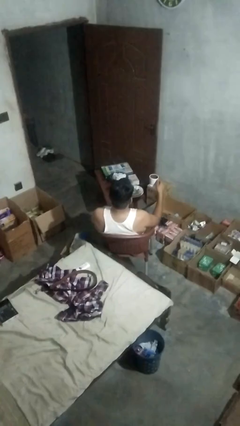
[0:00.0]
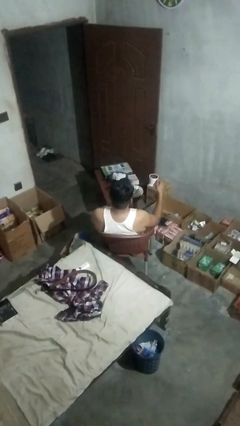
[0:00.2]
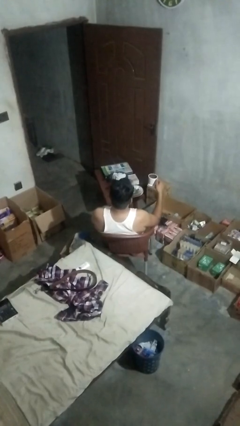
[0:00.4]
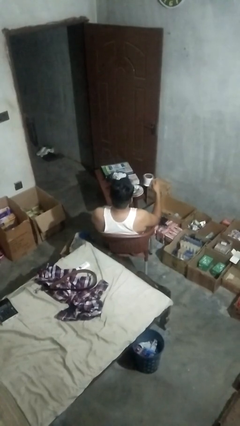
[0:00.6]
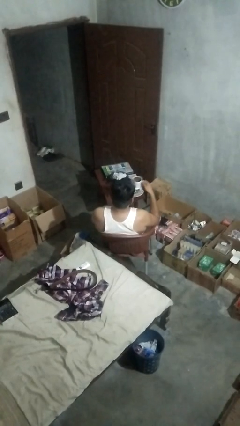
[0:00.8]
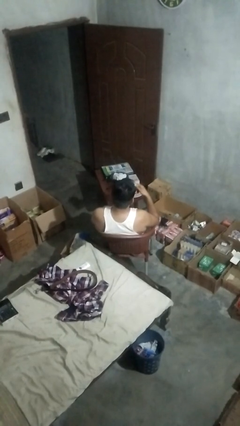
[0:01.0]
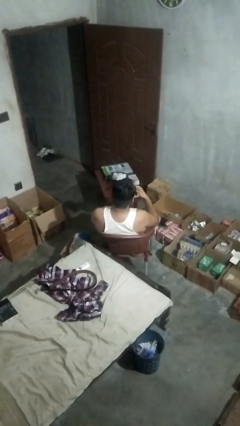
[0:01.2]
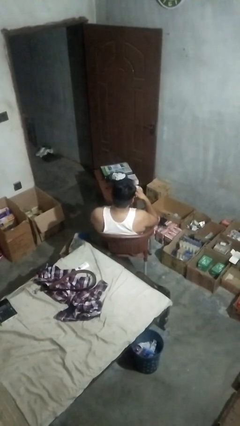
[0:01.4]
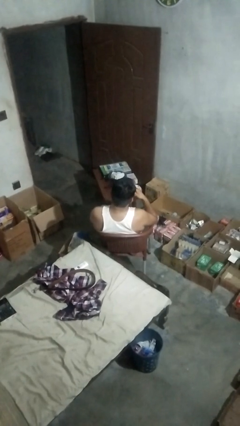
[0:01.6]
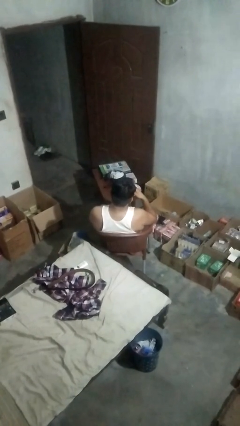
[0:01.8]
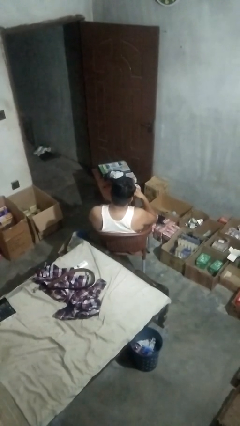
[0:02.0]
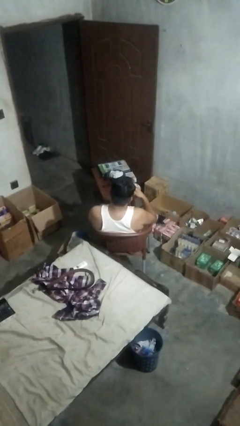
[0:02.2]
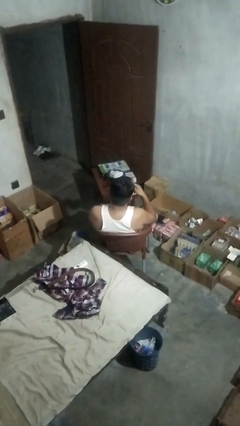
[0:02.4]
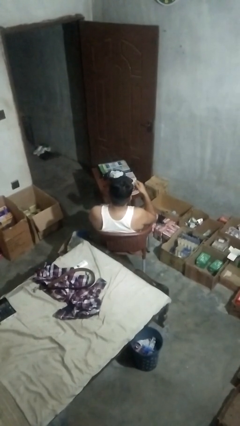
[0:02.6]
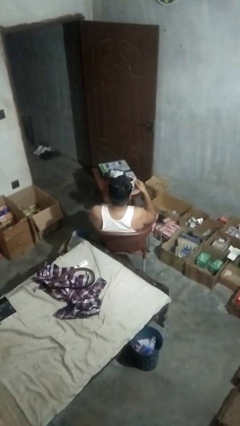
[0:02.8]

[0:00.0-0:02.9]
person drinks from mug

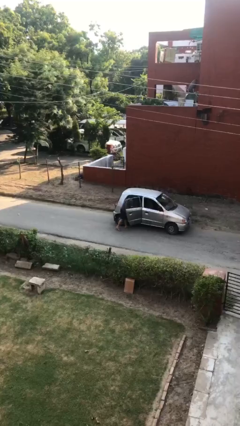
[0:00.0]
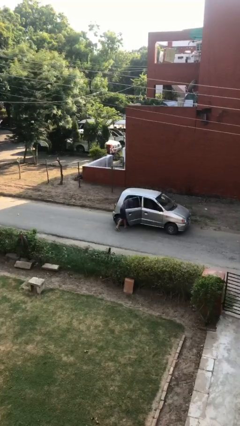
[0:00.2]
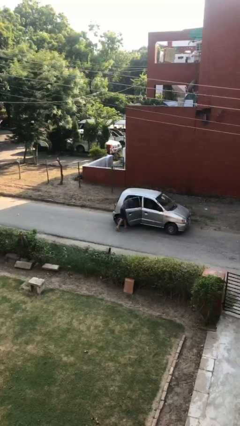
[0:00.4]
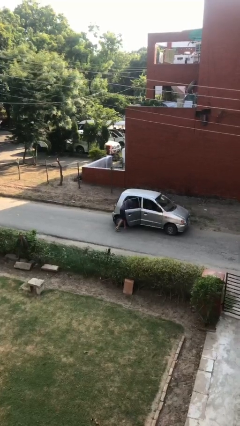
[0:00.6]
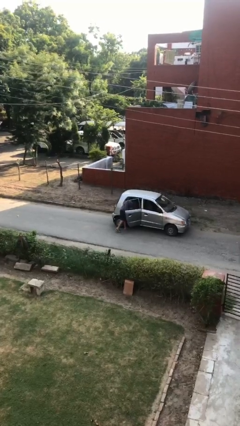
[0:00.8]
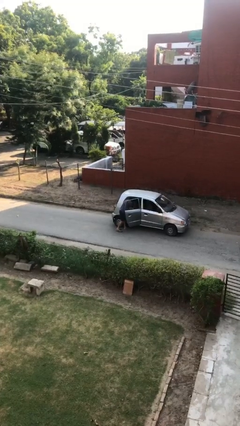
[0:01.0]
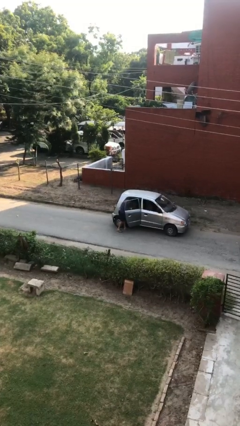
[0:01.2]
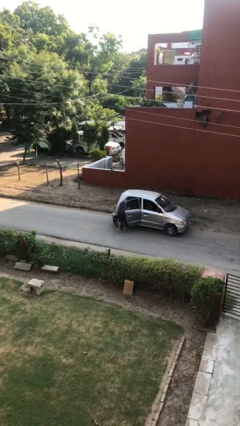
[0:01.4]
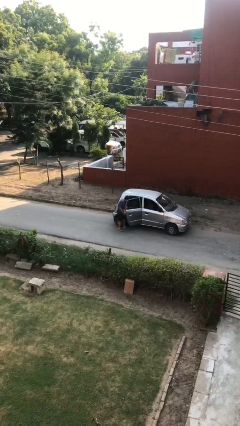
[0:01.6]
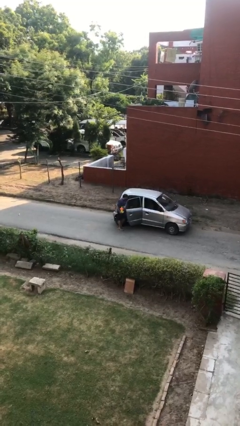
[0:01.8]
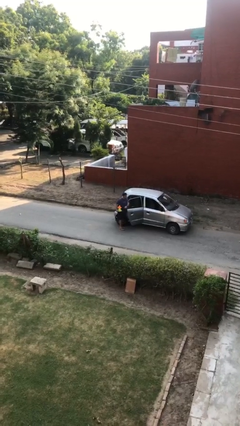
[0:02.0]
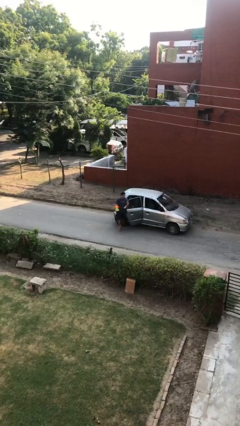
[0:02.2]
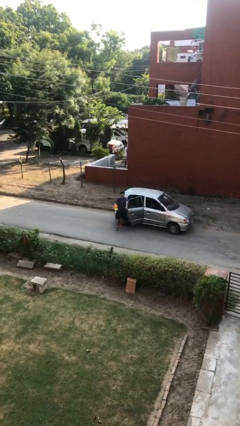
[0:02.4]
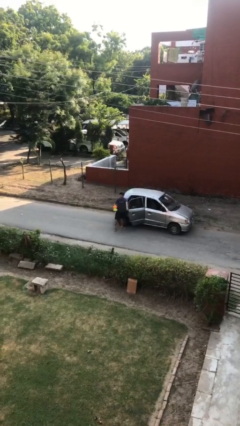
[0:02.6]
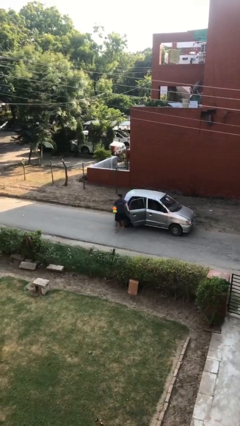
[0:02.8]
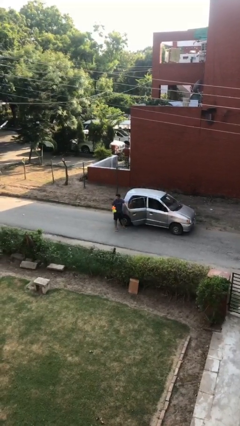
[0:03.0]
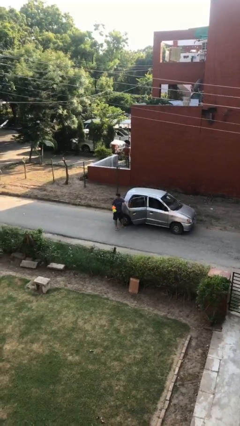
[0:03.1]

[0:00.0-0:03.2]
person unloads car

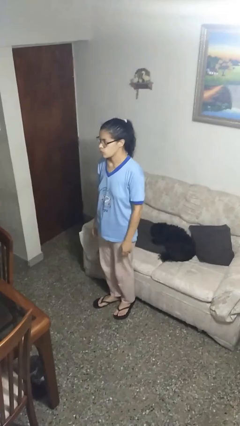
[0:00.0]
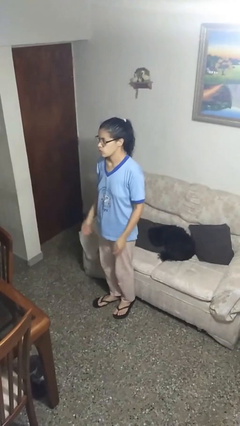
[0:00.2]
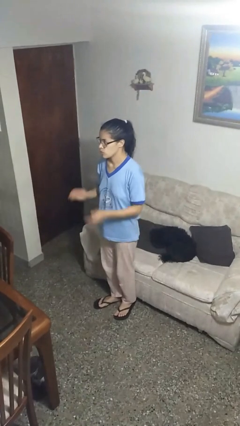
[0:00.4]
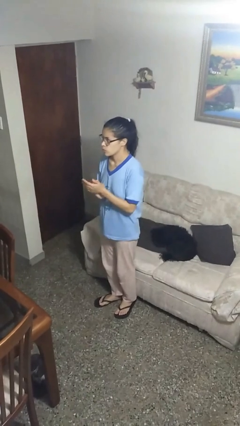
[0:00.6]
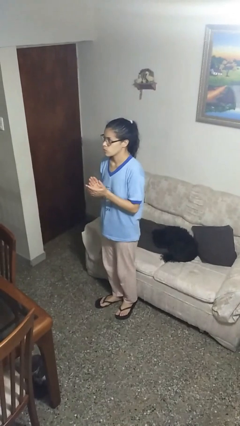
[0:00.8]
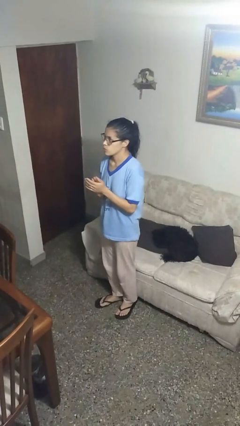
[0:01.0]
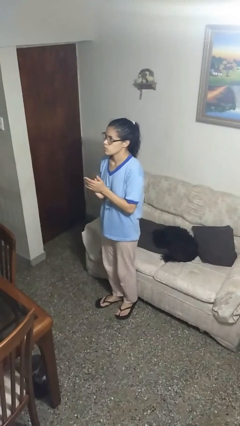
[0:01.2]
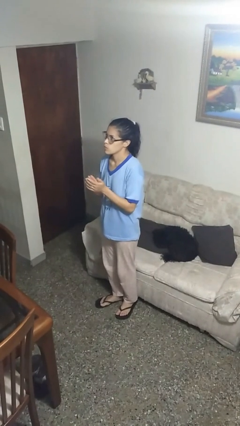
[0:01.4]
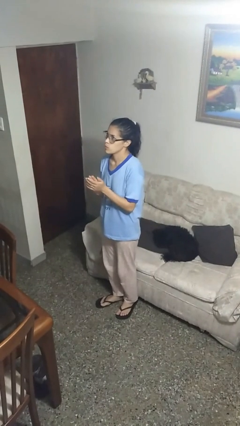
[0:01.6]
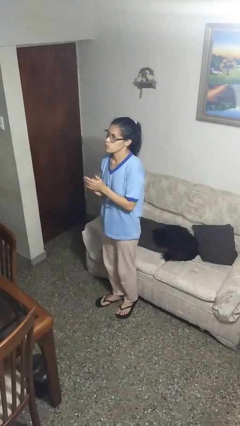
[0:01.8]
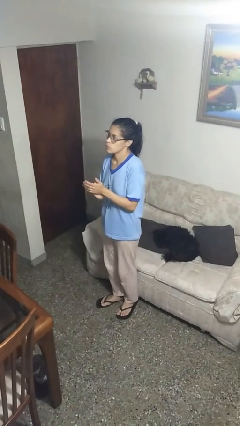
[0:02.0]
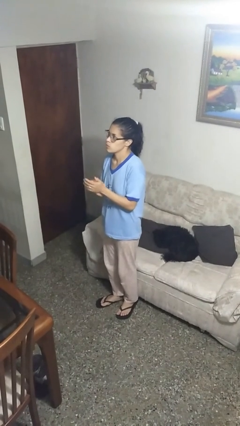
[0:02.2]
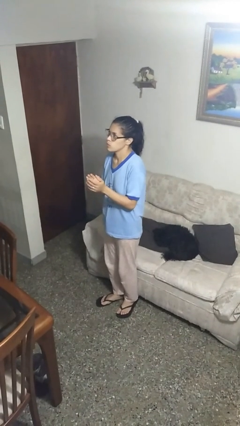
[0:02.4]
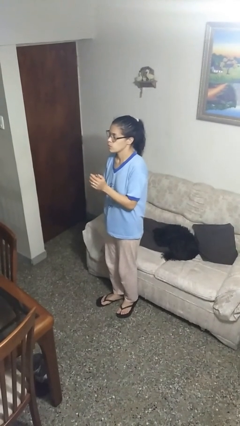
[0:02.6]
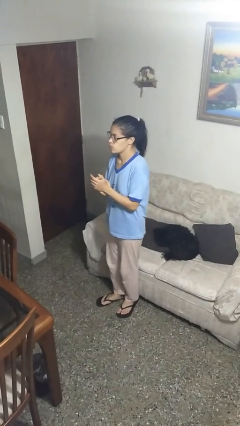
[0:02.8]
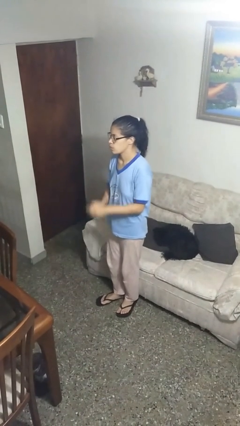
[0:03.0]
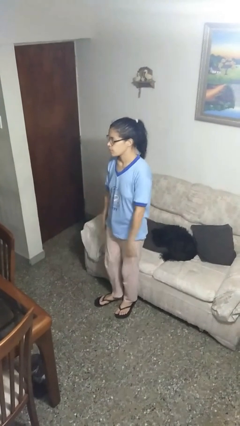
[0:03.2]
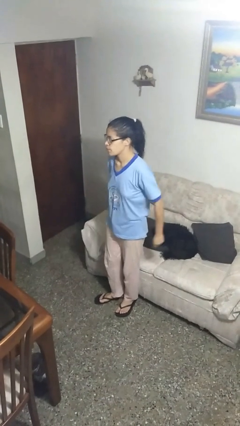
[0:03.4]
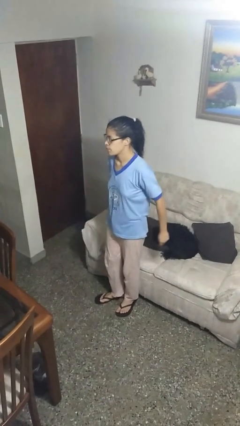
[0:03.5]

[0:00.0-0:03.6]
person claps hands

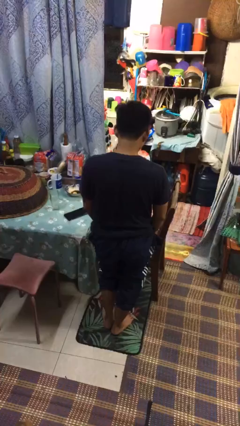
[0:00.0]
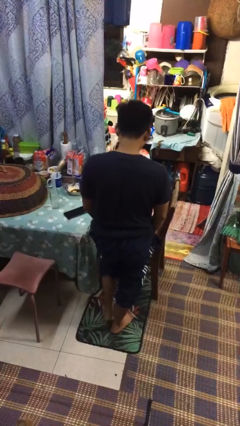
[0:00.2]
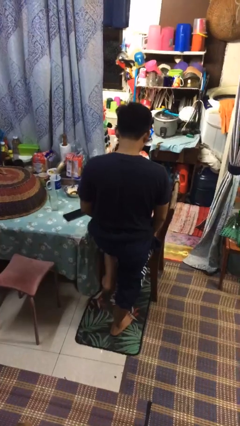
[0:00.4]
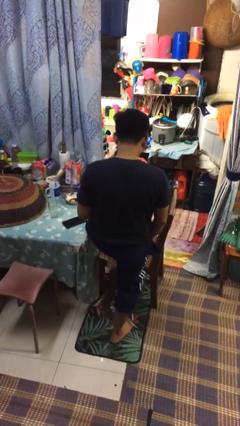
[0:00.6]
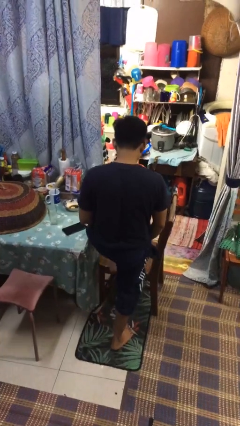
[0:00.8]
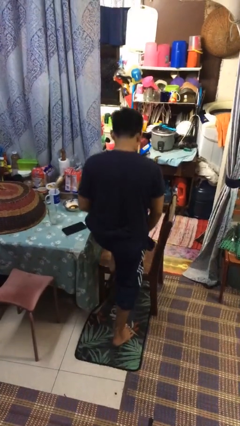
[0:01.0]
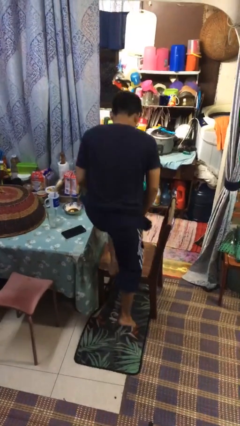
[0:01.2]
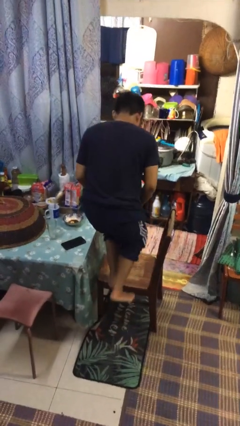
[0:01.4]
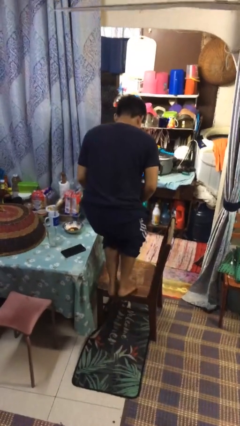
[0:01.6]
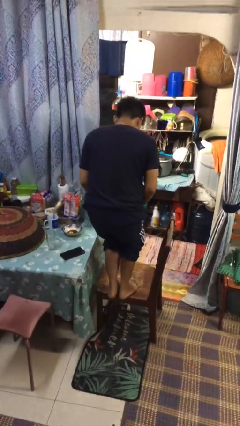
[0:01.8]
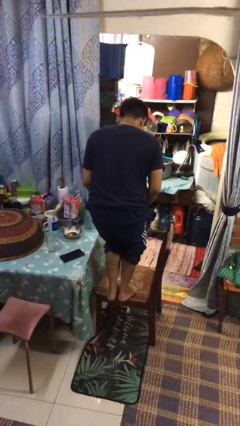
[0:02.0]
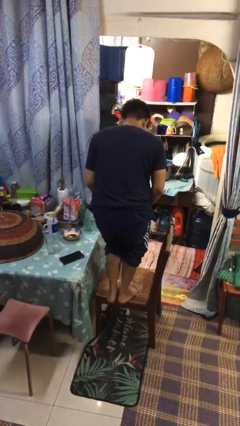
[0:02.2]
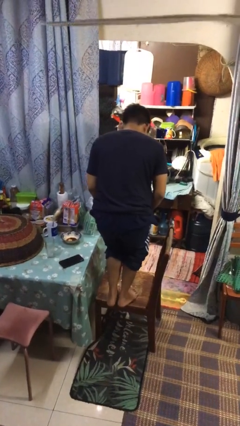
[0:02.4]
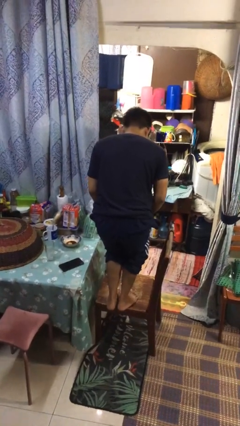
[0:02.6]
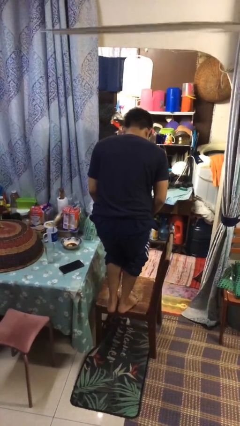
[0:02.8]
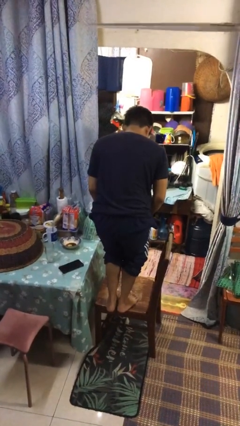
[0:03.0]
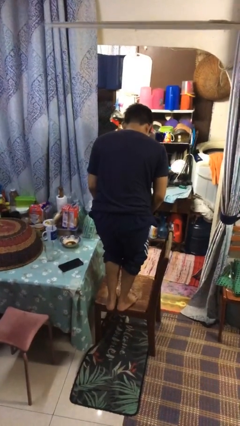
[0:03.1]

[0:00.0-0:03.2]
person climbs on chair

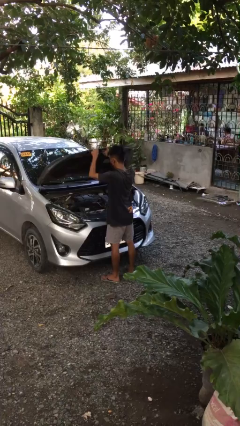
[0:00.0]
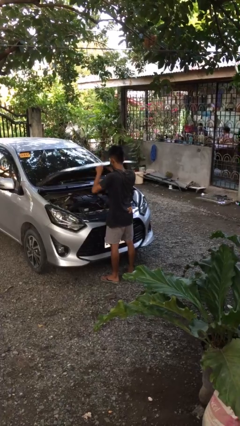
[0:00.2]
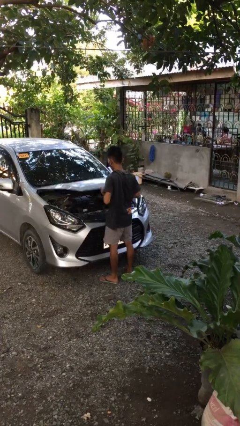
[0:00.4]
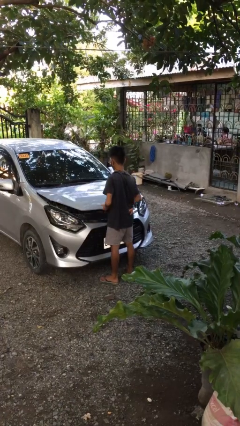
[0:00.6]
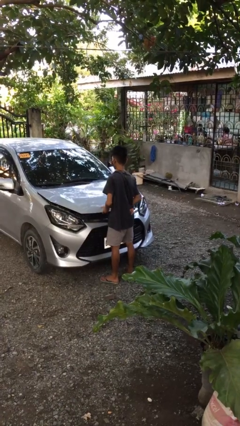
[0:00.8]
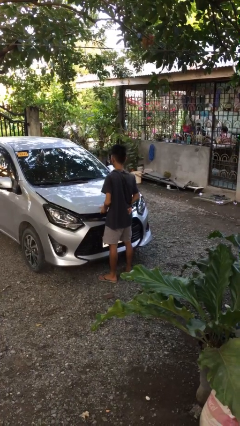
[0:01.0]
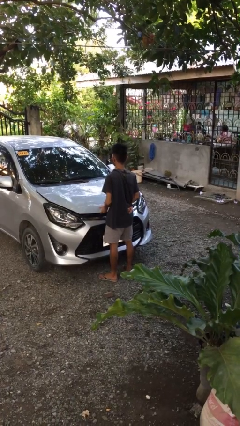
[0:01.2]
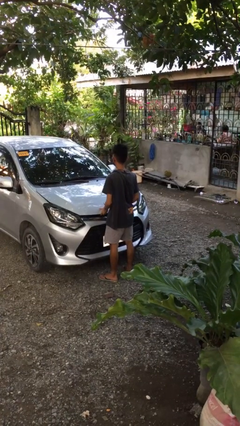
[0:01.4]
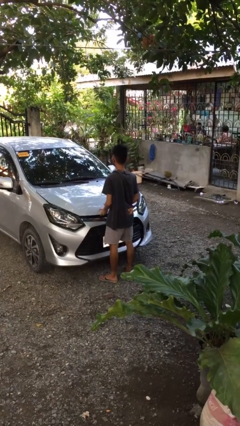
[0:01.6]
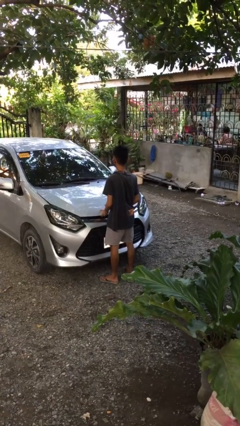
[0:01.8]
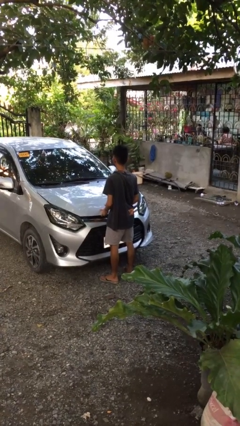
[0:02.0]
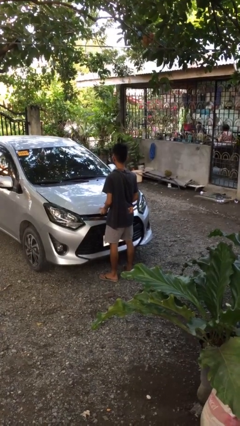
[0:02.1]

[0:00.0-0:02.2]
person closes car hood

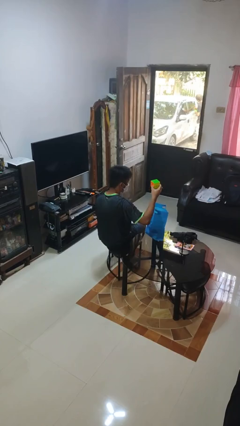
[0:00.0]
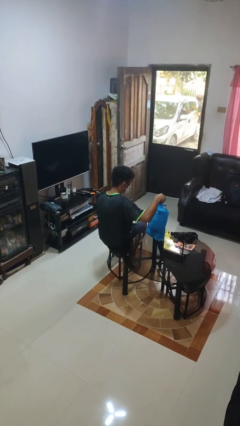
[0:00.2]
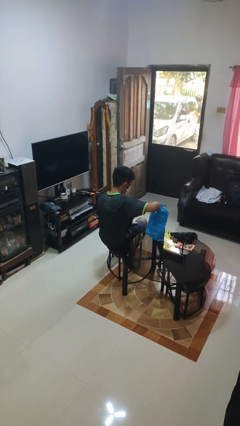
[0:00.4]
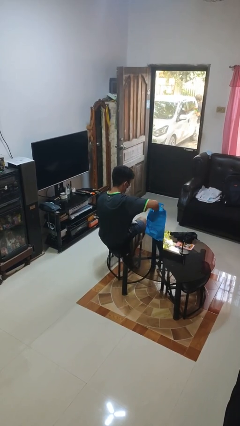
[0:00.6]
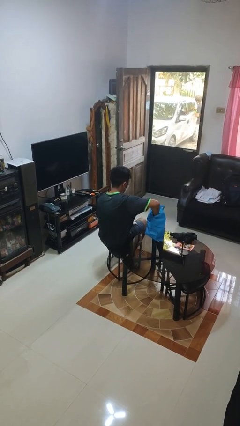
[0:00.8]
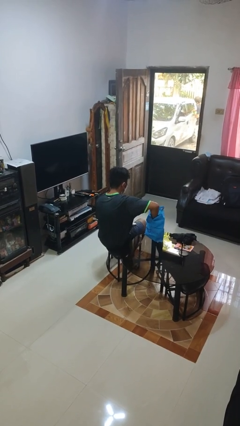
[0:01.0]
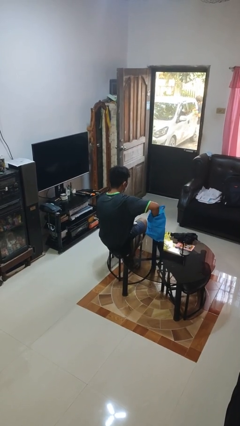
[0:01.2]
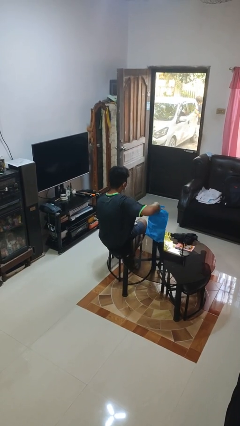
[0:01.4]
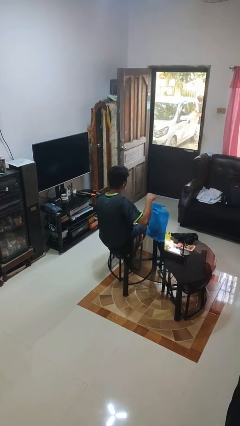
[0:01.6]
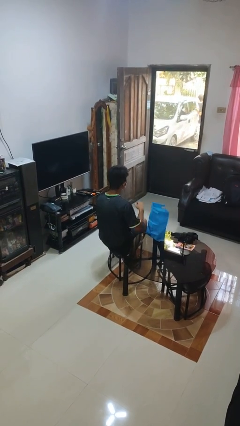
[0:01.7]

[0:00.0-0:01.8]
person puts object into bag

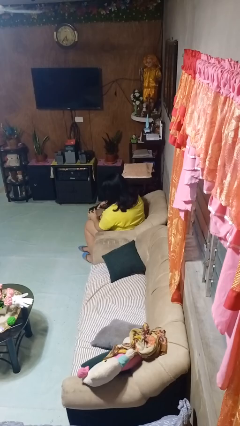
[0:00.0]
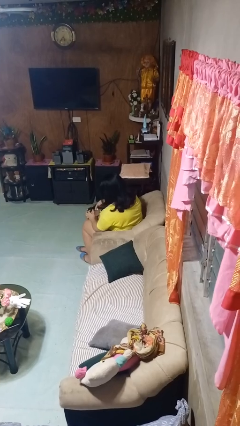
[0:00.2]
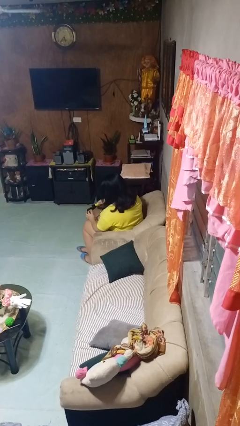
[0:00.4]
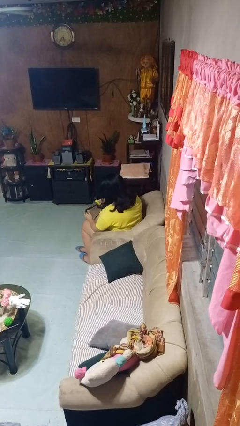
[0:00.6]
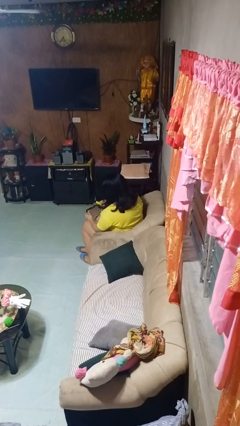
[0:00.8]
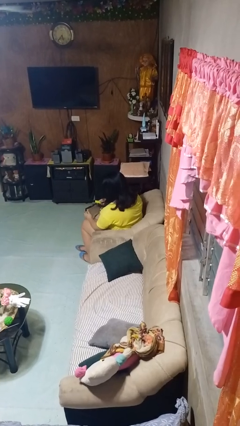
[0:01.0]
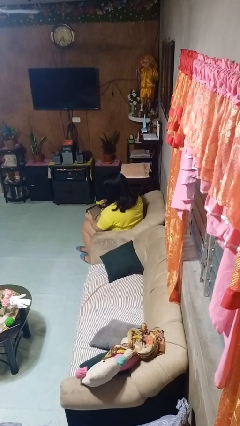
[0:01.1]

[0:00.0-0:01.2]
person takes object from purse
